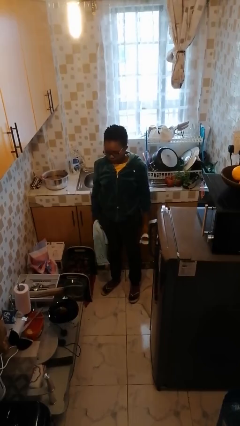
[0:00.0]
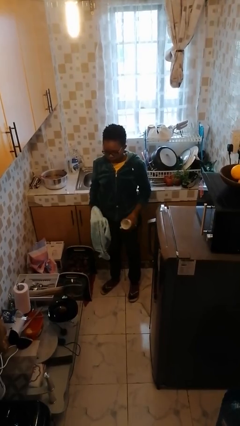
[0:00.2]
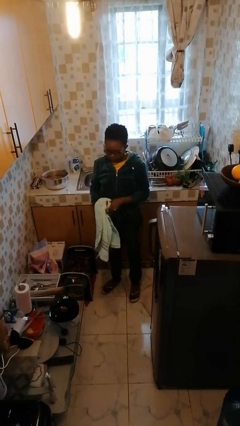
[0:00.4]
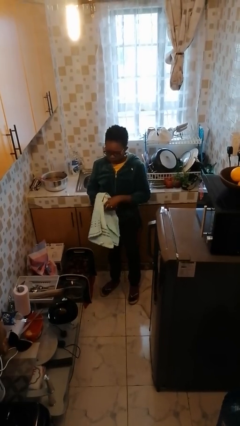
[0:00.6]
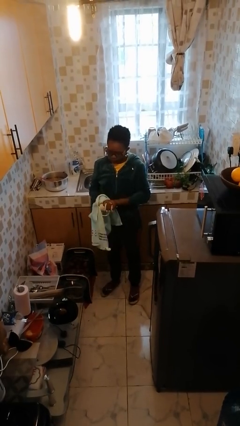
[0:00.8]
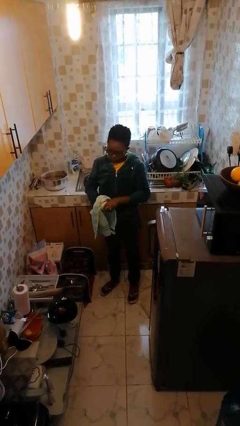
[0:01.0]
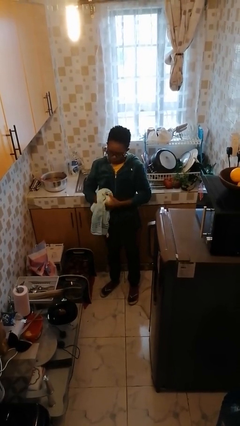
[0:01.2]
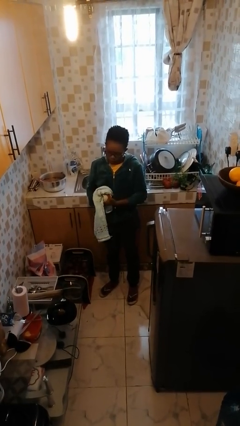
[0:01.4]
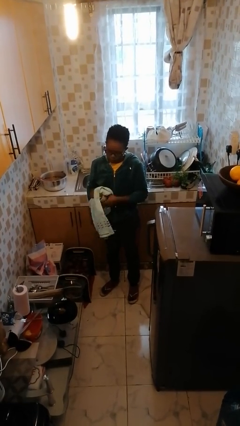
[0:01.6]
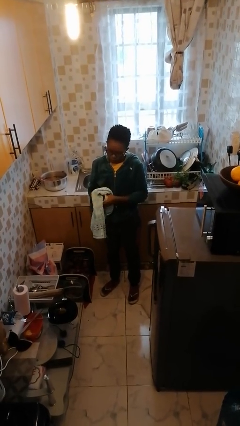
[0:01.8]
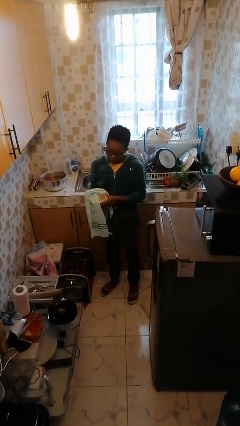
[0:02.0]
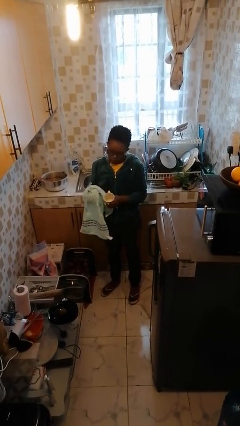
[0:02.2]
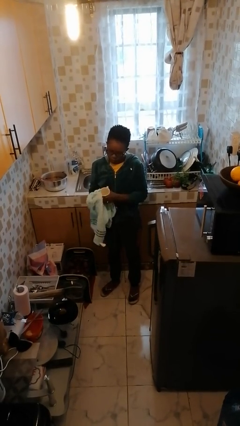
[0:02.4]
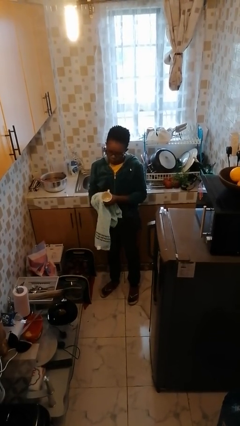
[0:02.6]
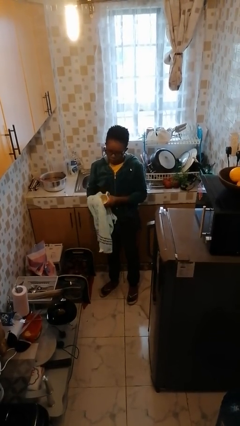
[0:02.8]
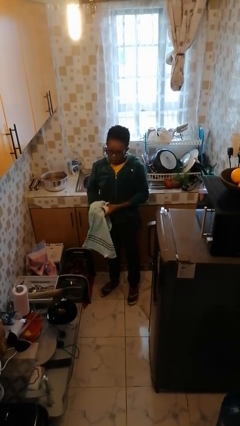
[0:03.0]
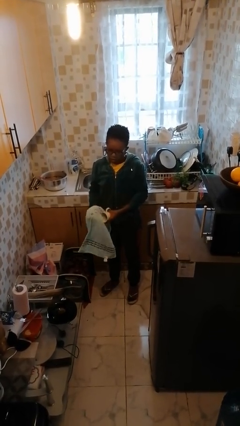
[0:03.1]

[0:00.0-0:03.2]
person dries dish

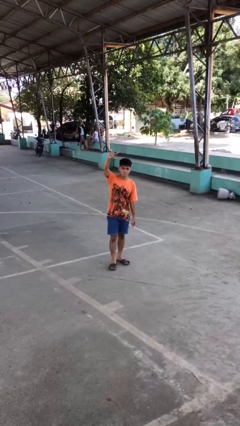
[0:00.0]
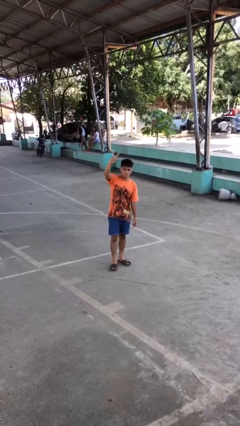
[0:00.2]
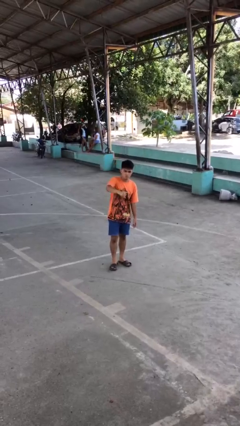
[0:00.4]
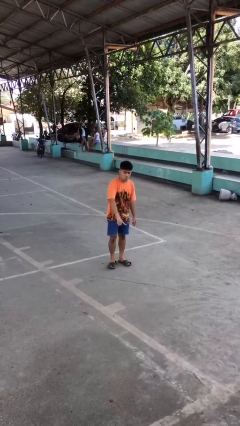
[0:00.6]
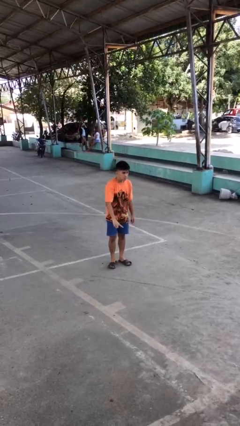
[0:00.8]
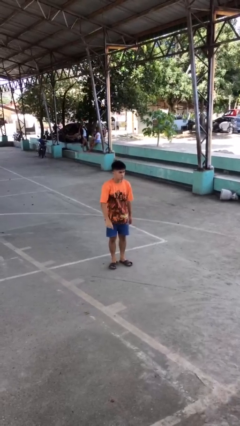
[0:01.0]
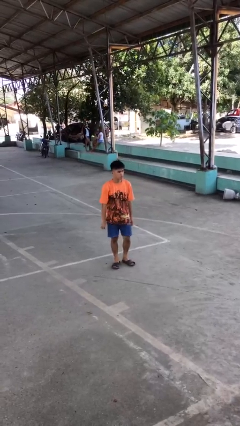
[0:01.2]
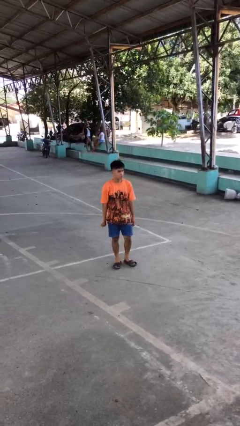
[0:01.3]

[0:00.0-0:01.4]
person gestures swipe down

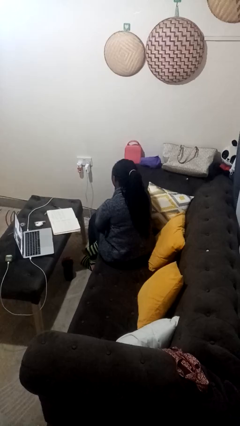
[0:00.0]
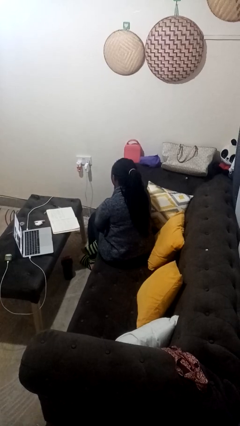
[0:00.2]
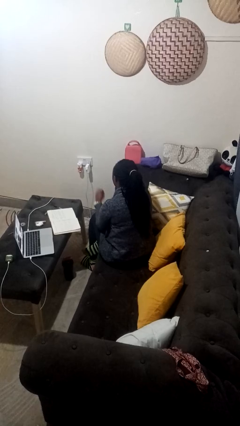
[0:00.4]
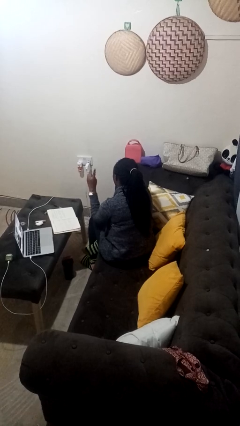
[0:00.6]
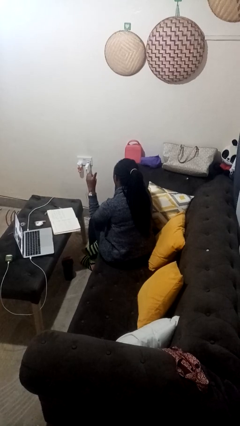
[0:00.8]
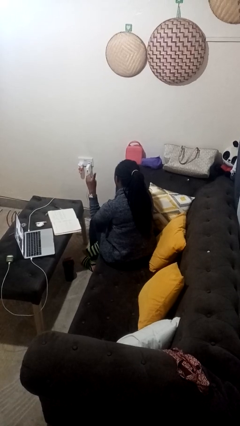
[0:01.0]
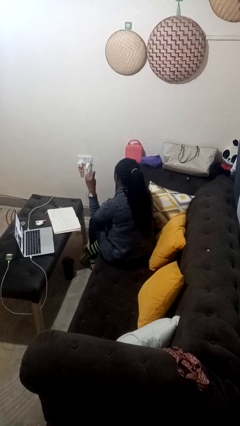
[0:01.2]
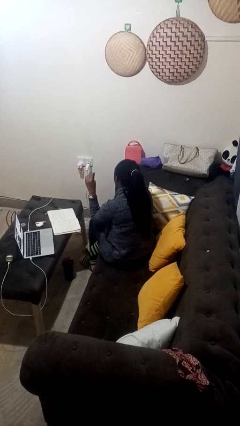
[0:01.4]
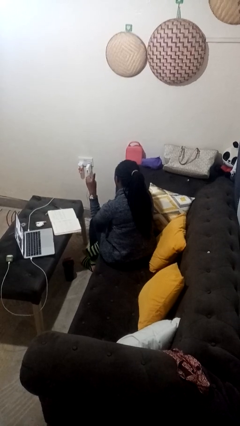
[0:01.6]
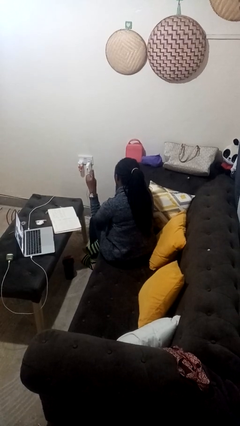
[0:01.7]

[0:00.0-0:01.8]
person gestures number one

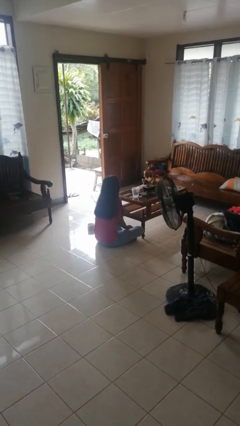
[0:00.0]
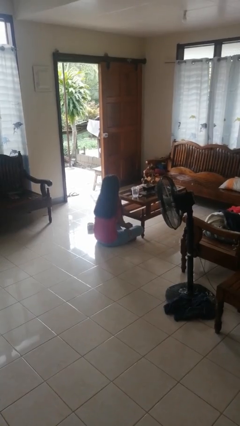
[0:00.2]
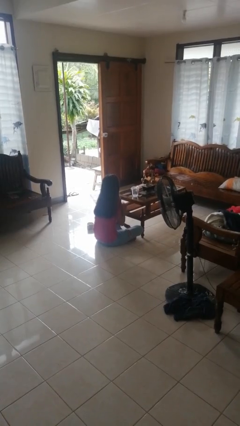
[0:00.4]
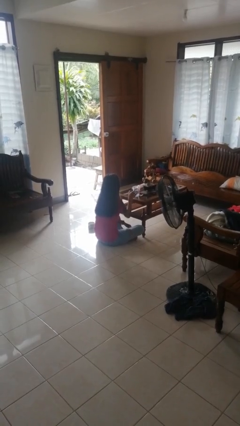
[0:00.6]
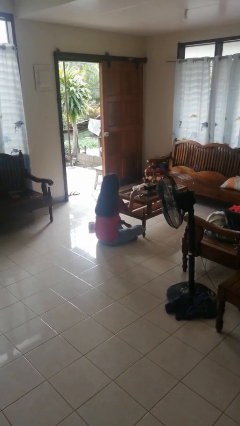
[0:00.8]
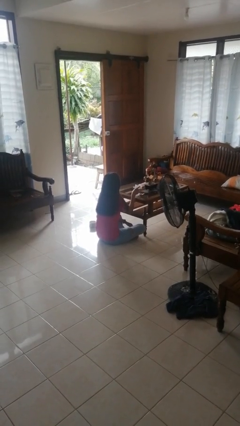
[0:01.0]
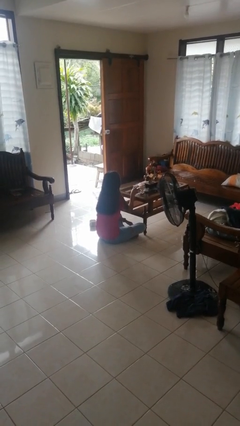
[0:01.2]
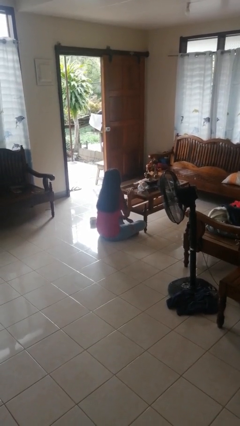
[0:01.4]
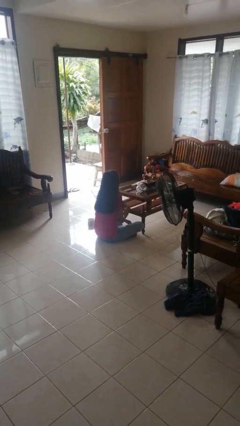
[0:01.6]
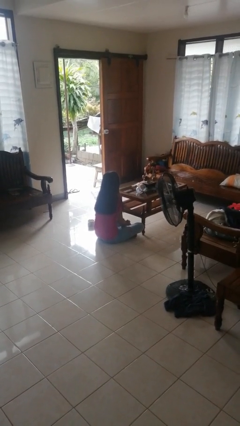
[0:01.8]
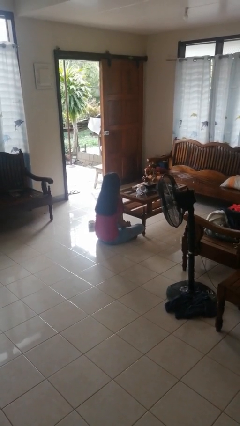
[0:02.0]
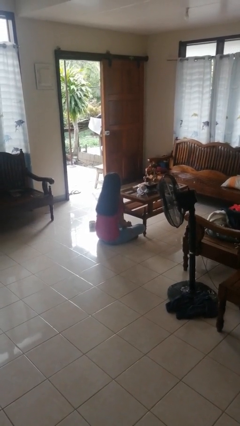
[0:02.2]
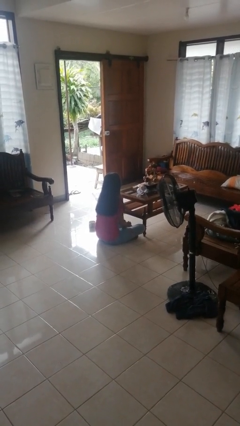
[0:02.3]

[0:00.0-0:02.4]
person knocks over glass

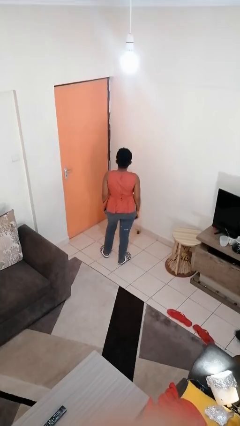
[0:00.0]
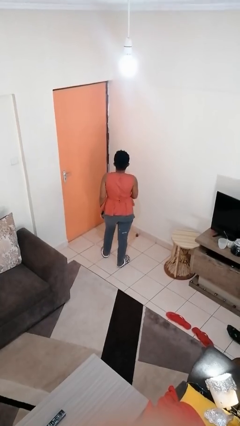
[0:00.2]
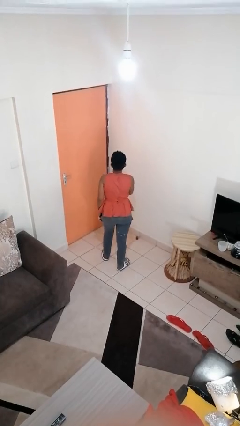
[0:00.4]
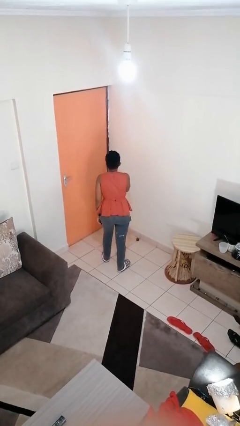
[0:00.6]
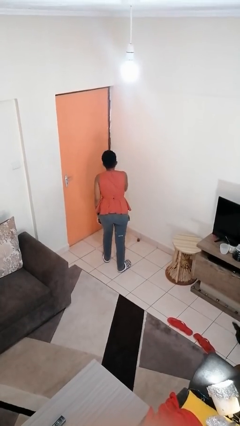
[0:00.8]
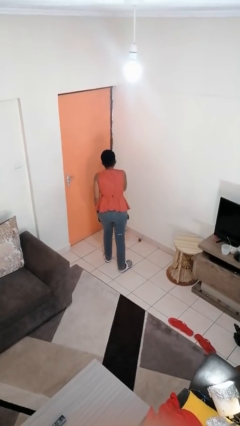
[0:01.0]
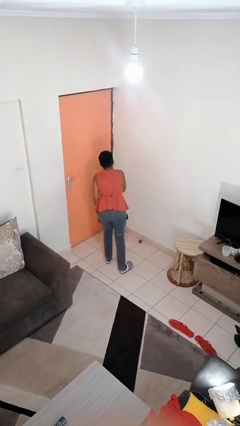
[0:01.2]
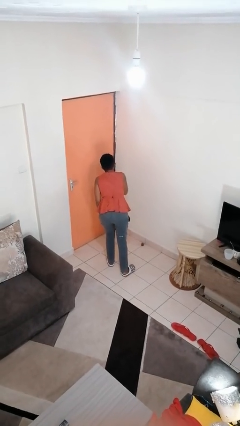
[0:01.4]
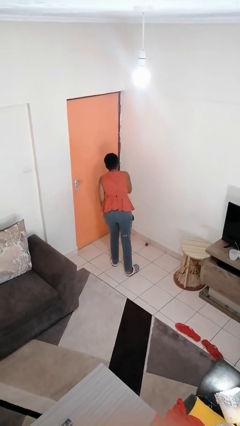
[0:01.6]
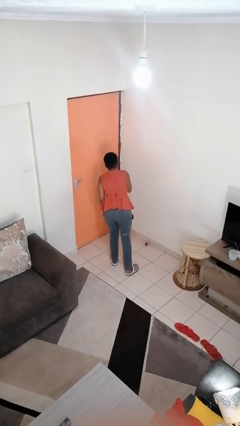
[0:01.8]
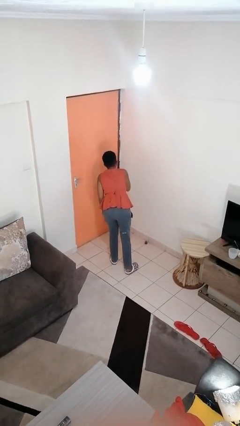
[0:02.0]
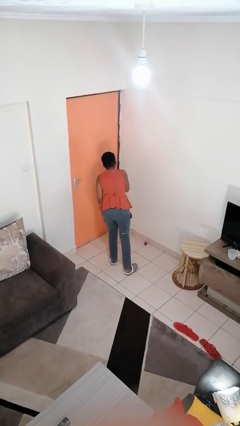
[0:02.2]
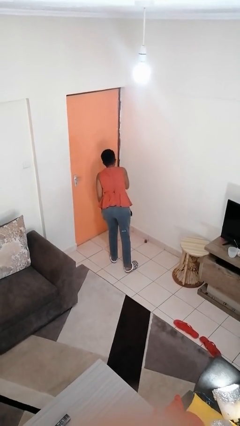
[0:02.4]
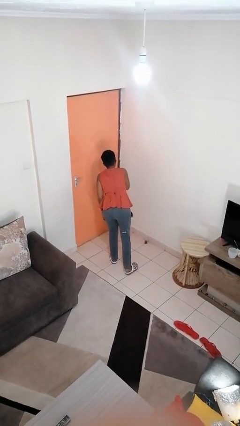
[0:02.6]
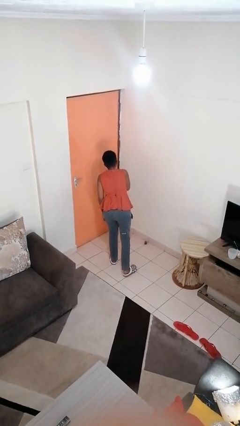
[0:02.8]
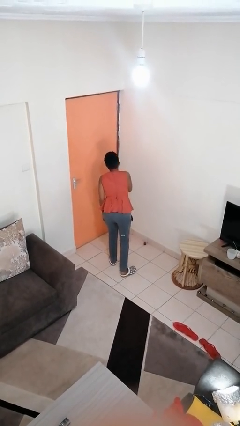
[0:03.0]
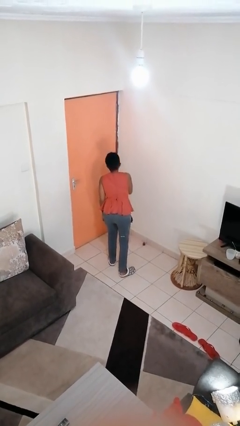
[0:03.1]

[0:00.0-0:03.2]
person gestures be quiet

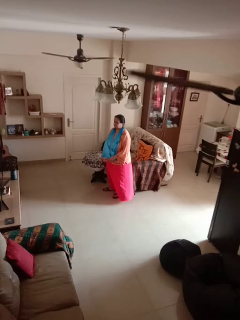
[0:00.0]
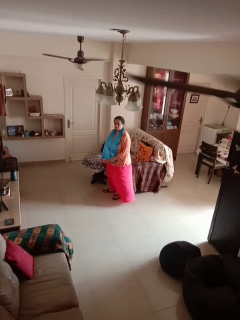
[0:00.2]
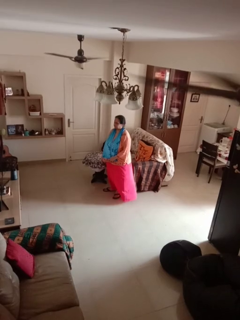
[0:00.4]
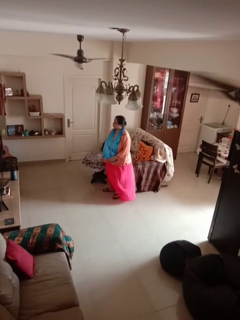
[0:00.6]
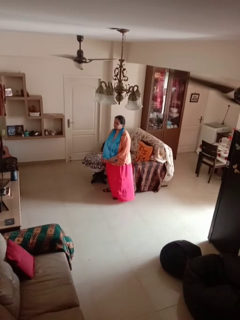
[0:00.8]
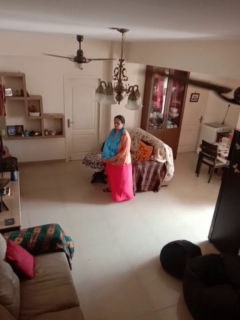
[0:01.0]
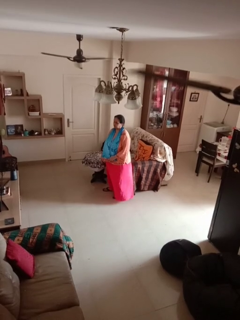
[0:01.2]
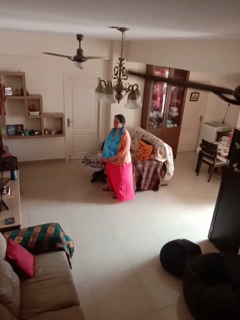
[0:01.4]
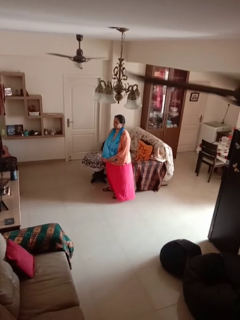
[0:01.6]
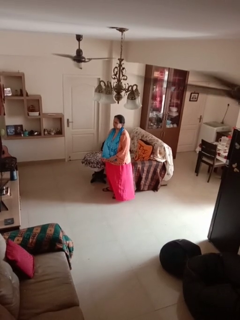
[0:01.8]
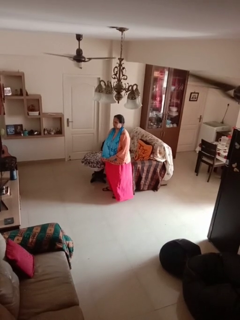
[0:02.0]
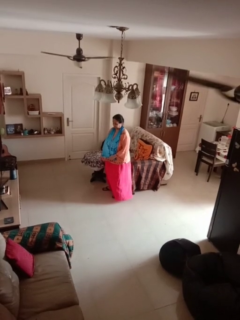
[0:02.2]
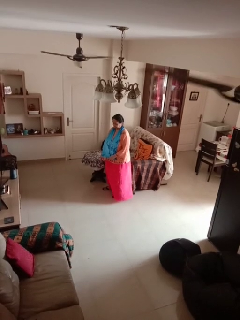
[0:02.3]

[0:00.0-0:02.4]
person shakes head

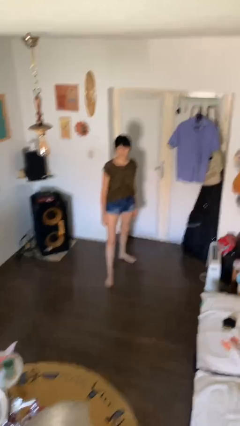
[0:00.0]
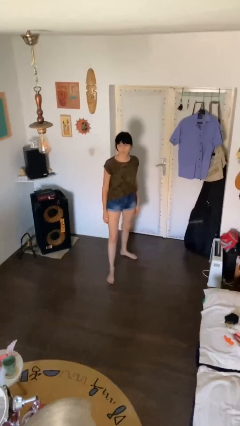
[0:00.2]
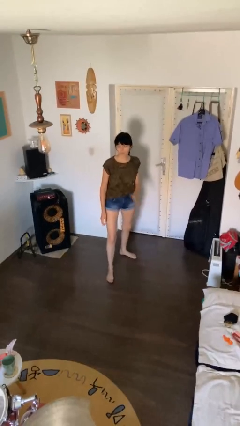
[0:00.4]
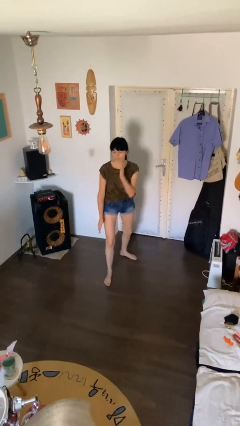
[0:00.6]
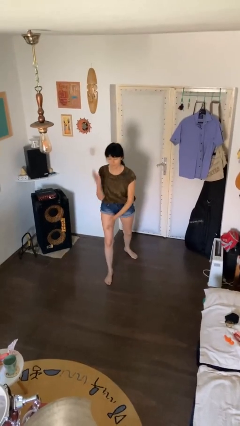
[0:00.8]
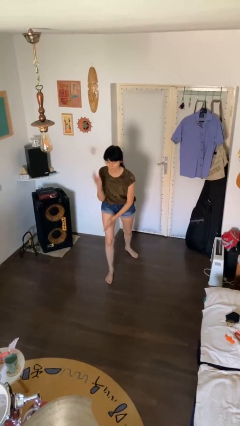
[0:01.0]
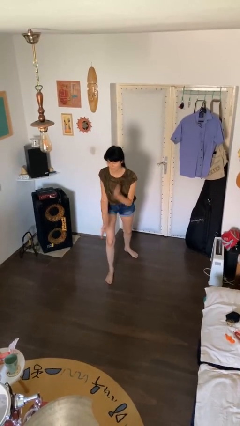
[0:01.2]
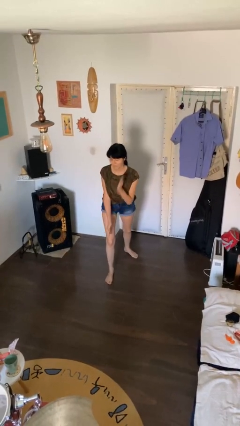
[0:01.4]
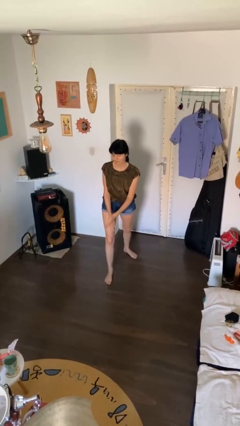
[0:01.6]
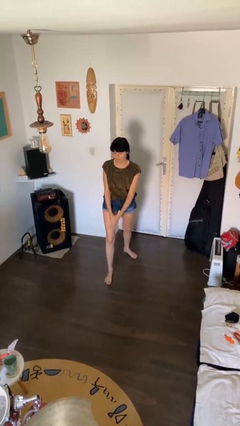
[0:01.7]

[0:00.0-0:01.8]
person karate chop

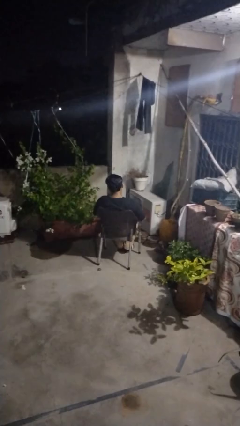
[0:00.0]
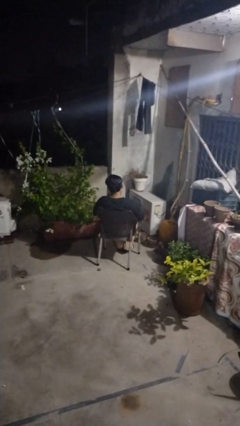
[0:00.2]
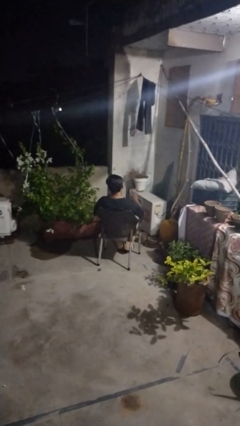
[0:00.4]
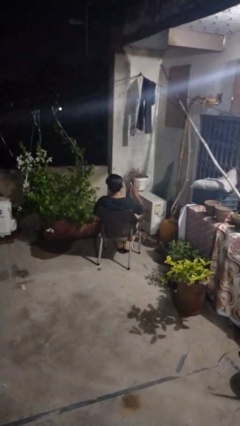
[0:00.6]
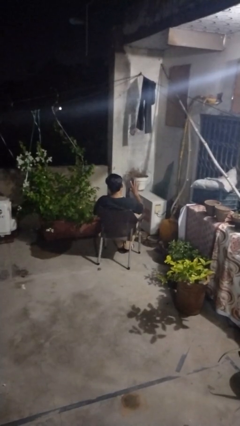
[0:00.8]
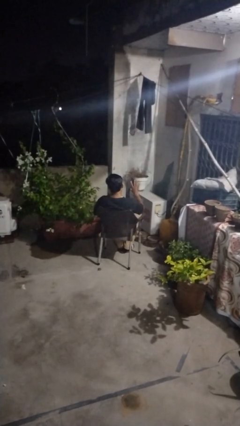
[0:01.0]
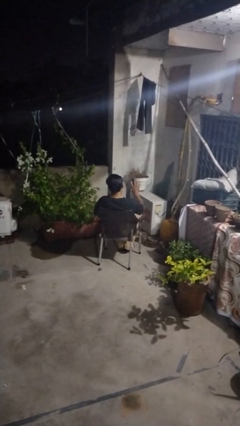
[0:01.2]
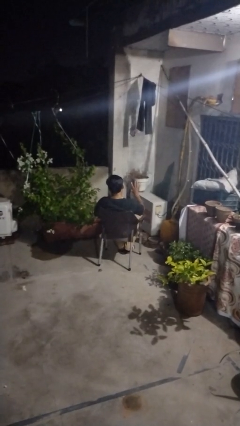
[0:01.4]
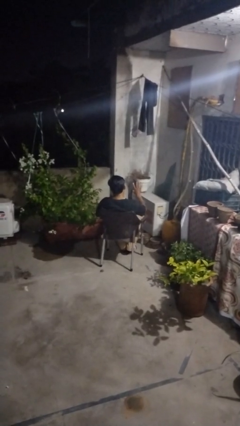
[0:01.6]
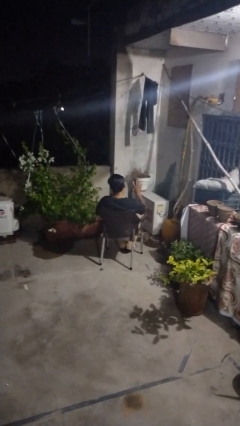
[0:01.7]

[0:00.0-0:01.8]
person gestures number four
